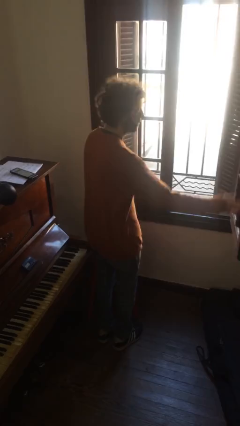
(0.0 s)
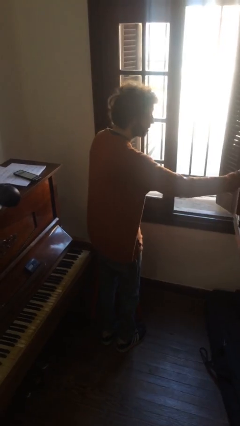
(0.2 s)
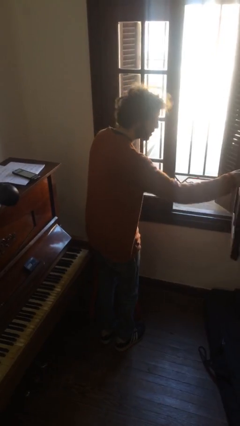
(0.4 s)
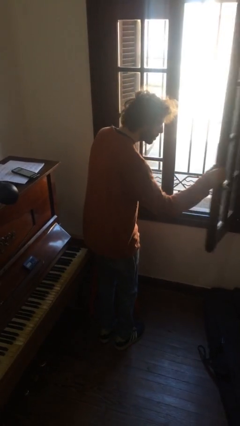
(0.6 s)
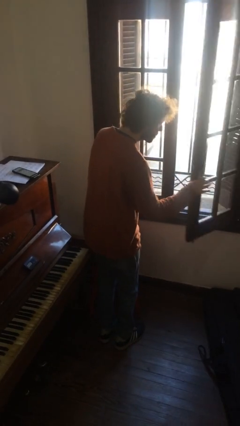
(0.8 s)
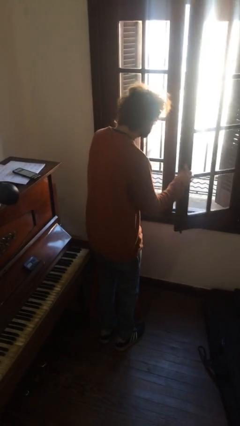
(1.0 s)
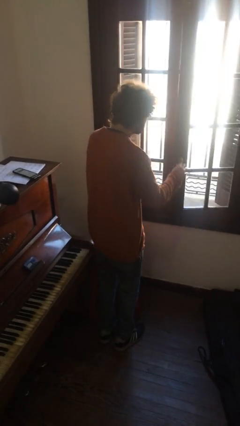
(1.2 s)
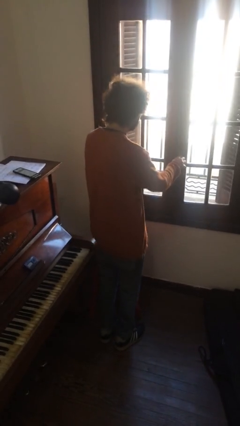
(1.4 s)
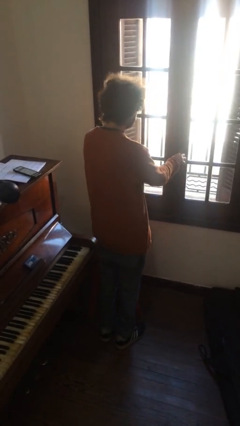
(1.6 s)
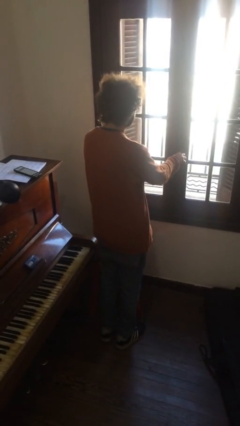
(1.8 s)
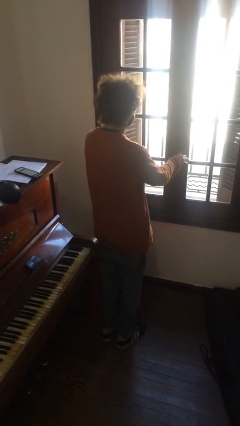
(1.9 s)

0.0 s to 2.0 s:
person closes home window

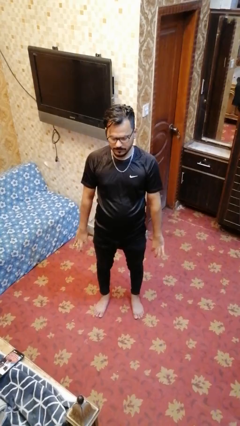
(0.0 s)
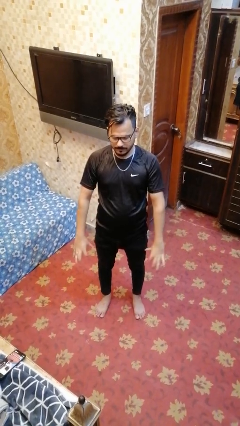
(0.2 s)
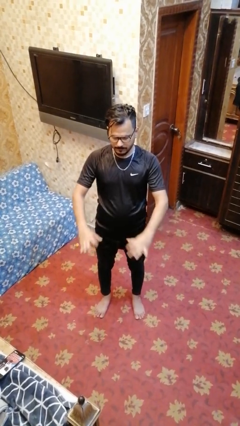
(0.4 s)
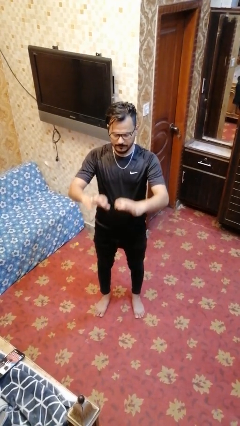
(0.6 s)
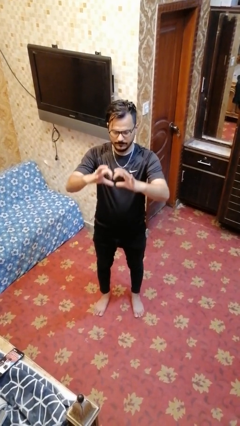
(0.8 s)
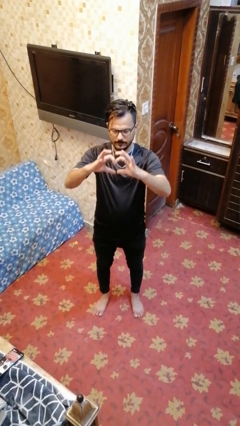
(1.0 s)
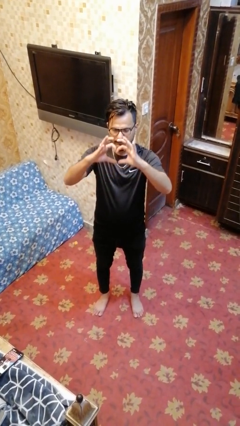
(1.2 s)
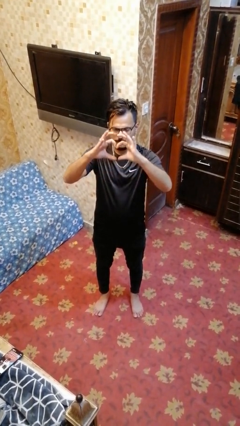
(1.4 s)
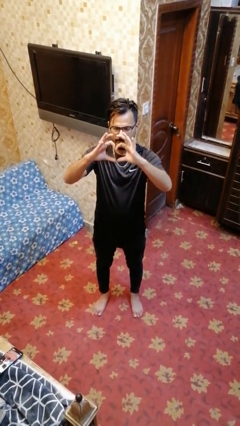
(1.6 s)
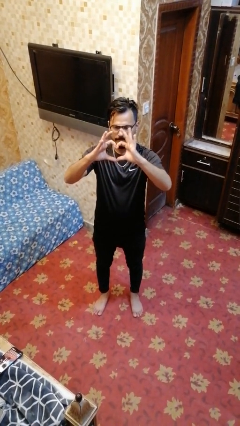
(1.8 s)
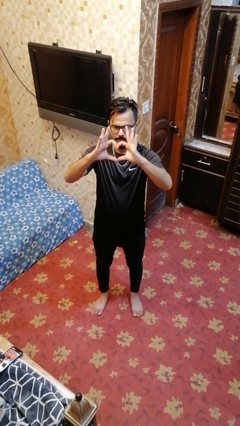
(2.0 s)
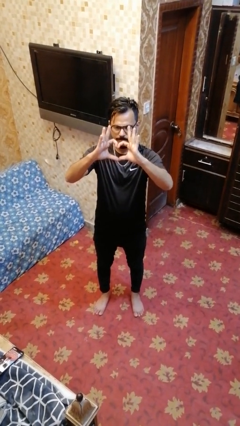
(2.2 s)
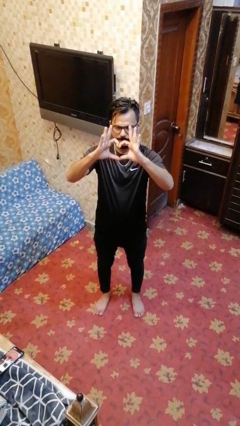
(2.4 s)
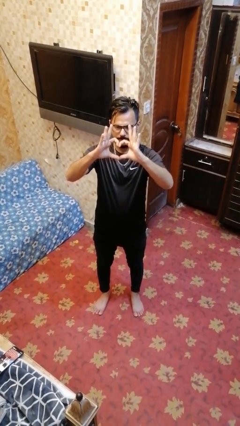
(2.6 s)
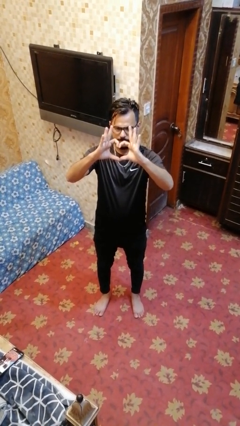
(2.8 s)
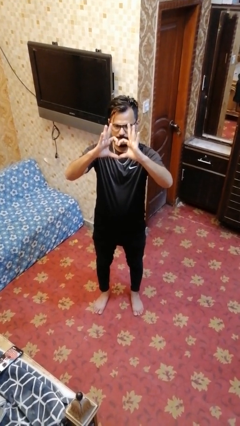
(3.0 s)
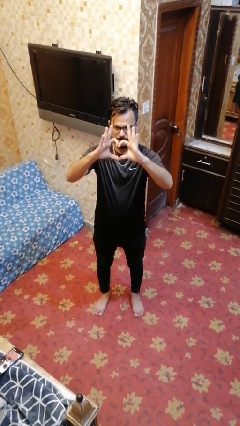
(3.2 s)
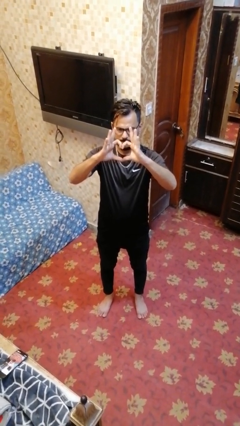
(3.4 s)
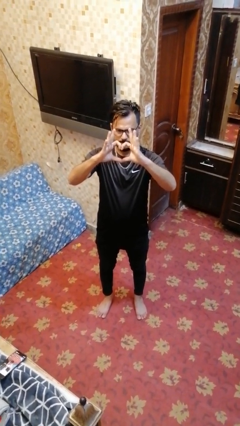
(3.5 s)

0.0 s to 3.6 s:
person gestures heart

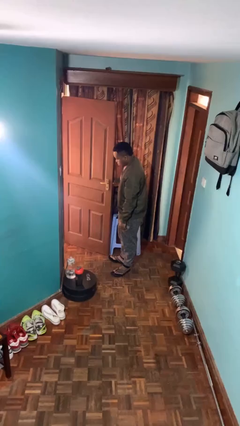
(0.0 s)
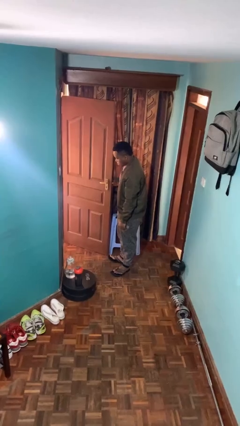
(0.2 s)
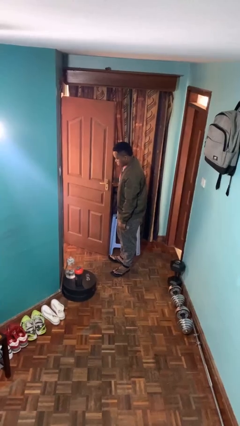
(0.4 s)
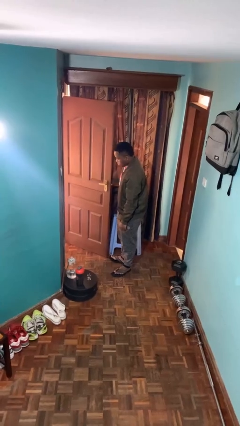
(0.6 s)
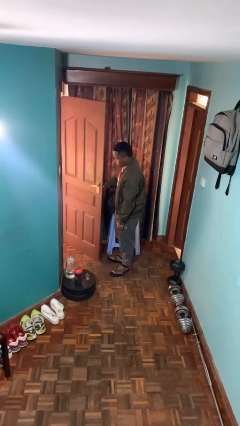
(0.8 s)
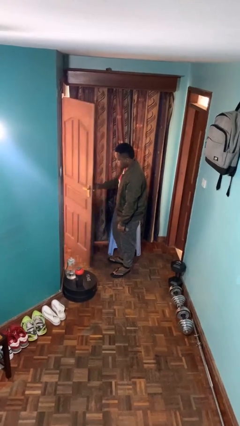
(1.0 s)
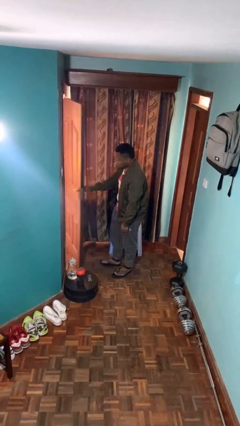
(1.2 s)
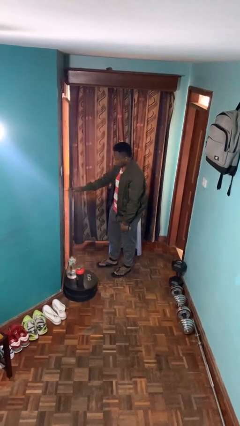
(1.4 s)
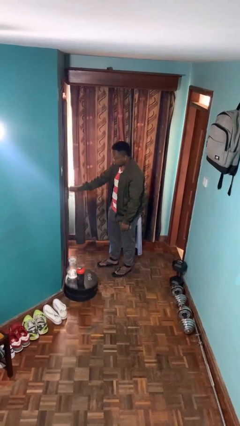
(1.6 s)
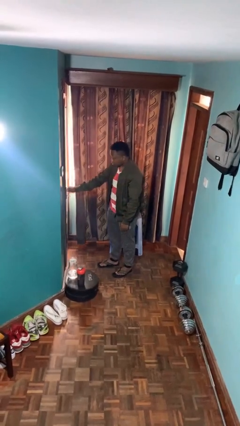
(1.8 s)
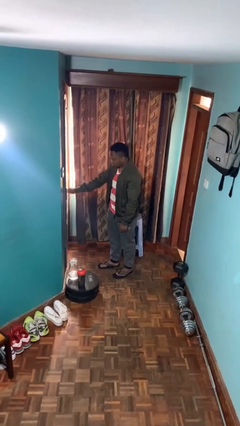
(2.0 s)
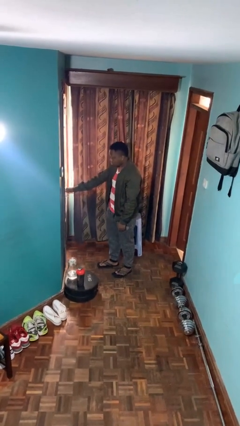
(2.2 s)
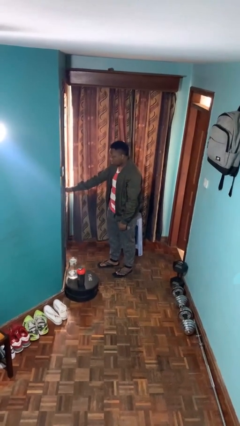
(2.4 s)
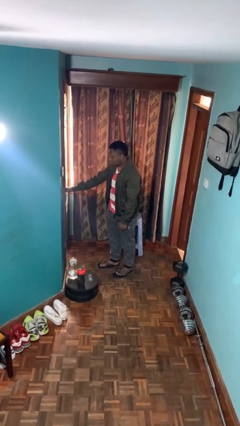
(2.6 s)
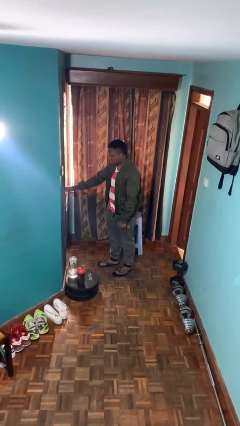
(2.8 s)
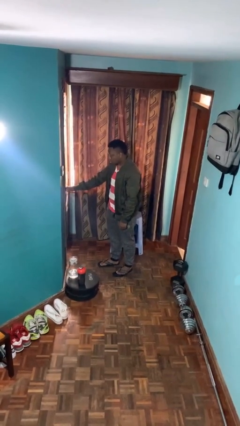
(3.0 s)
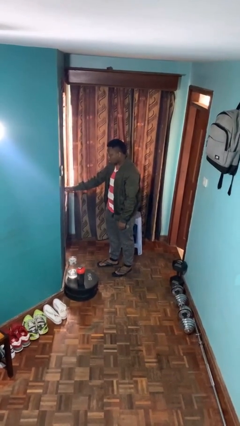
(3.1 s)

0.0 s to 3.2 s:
person closes facility door

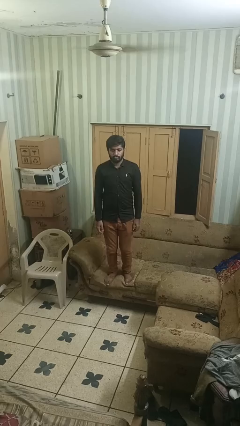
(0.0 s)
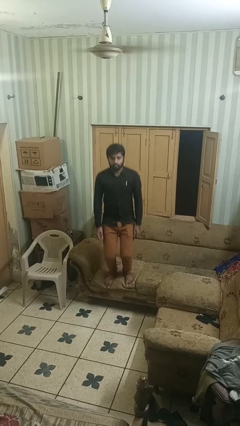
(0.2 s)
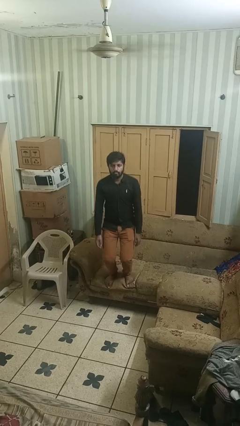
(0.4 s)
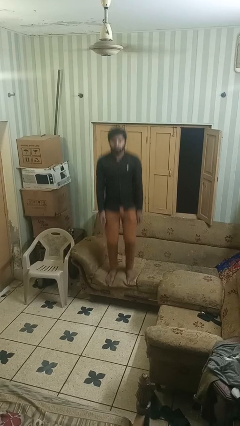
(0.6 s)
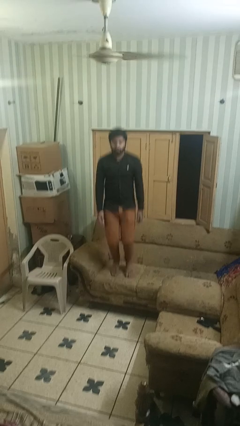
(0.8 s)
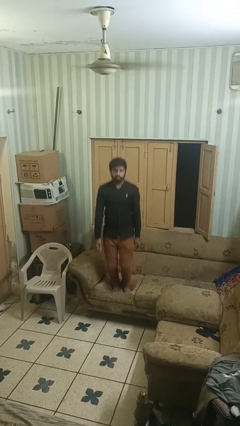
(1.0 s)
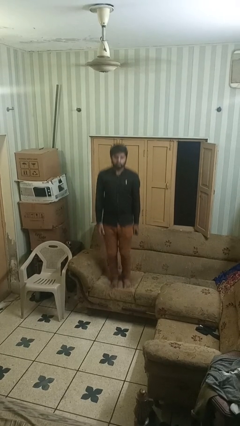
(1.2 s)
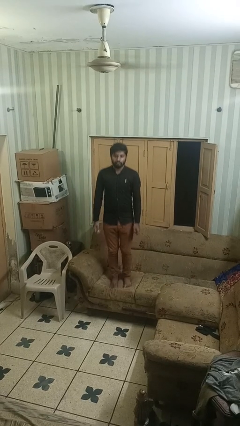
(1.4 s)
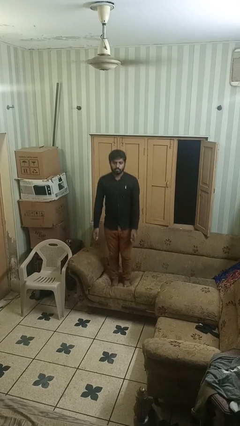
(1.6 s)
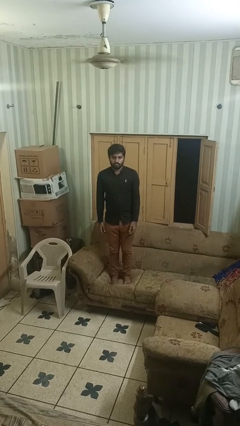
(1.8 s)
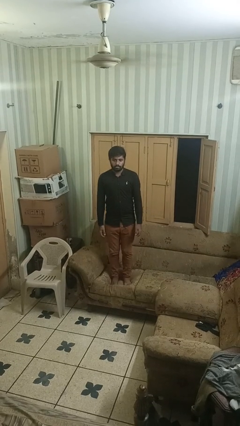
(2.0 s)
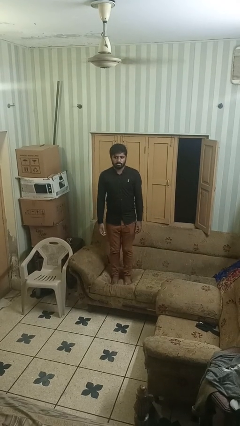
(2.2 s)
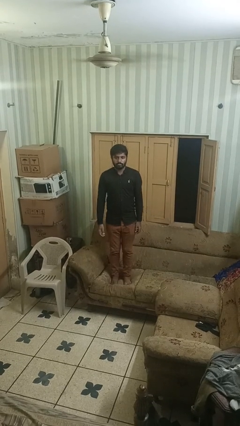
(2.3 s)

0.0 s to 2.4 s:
person jumps on couch

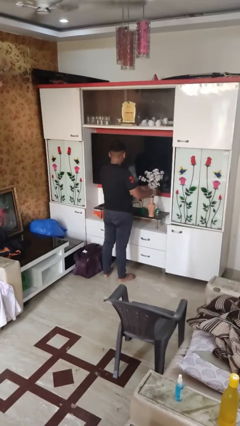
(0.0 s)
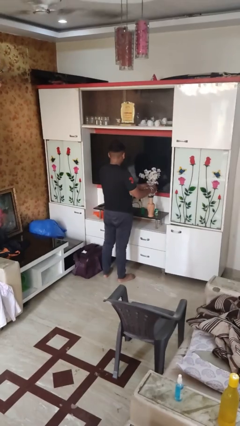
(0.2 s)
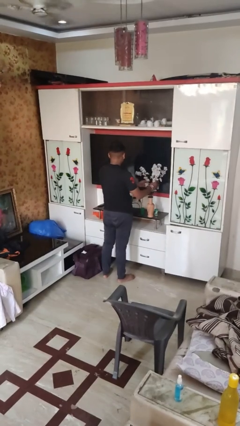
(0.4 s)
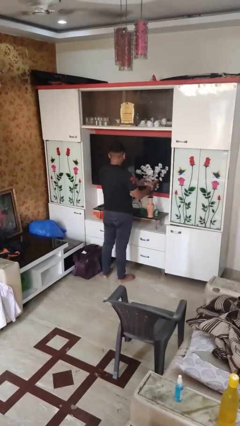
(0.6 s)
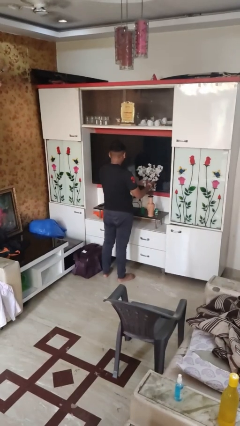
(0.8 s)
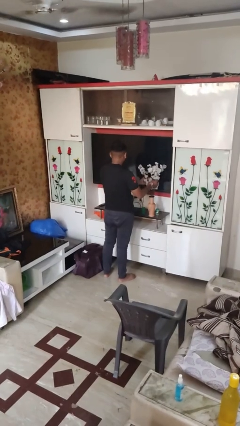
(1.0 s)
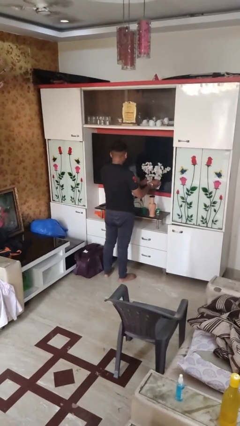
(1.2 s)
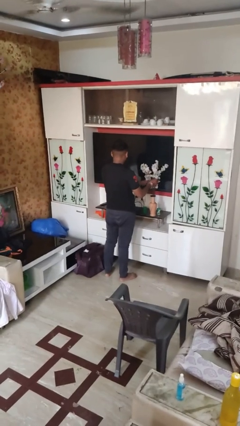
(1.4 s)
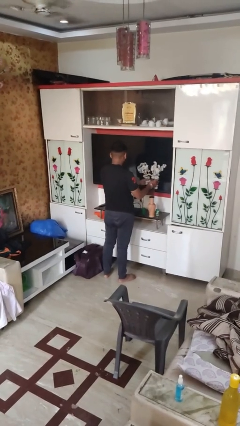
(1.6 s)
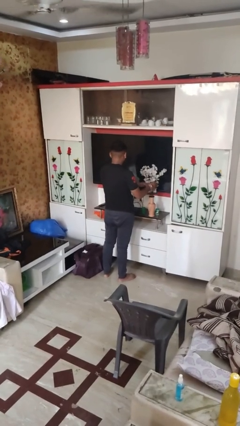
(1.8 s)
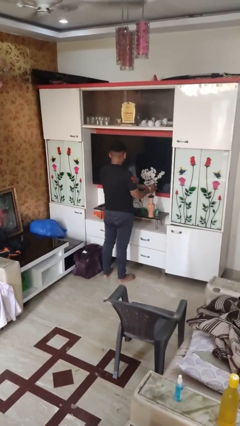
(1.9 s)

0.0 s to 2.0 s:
person arranges flowers in vase

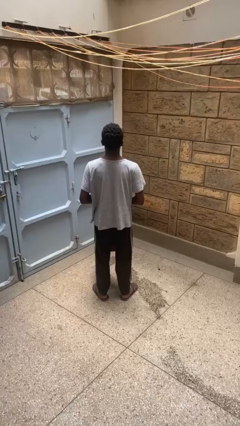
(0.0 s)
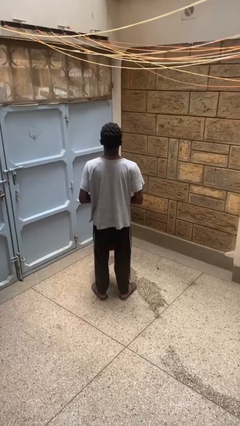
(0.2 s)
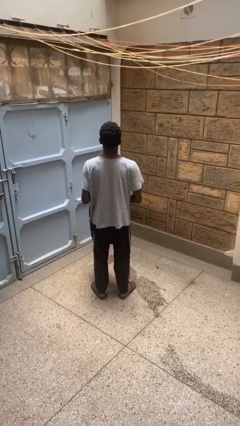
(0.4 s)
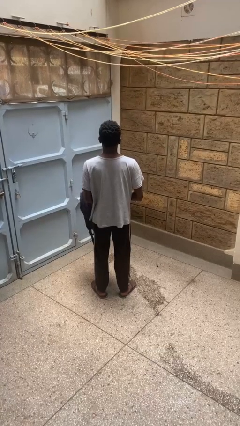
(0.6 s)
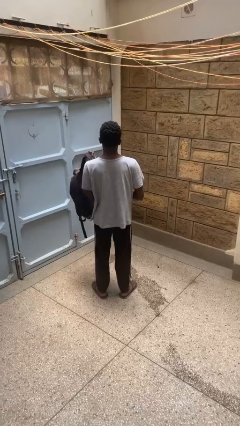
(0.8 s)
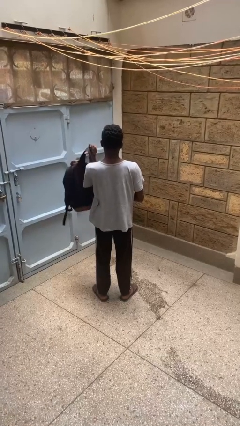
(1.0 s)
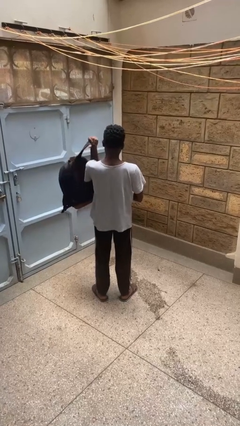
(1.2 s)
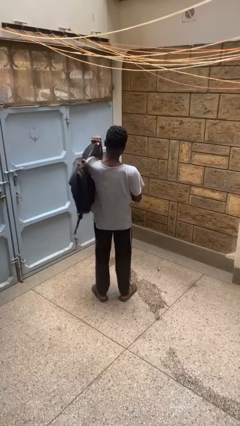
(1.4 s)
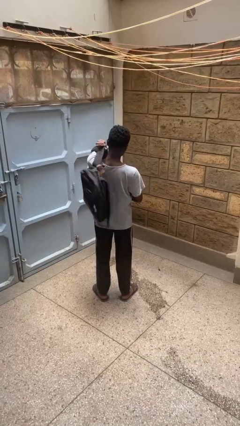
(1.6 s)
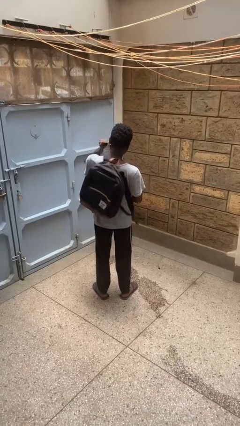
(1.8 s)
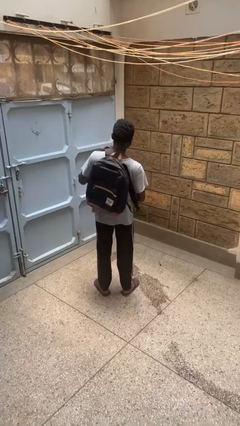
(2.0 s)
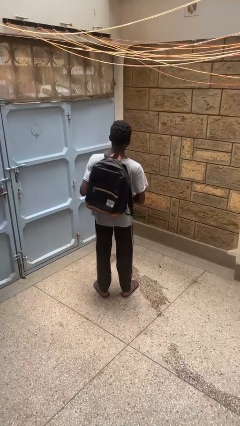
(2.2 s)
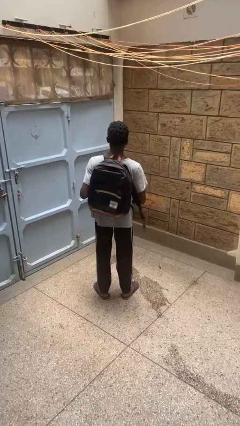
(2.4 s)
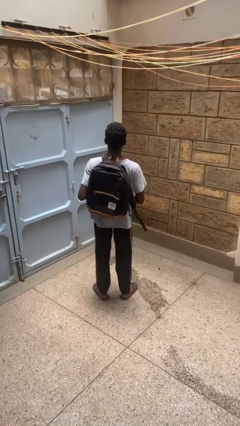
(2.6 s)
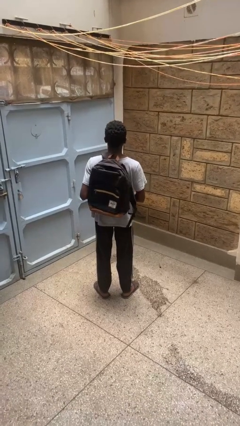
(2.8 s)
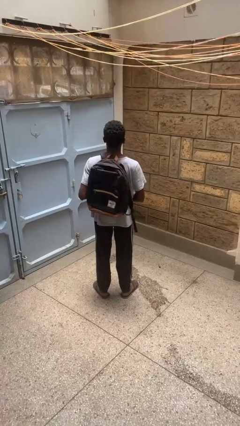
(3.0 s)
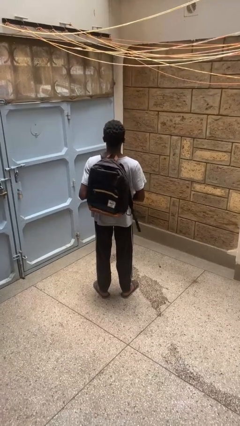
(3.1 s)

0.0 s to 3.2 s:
person puts on backpack

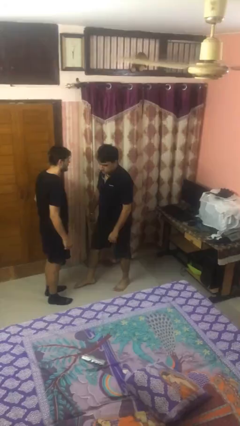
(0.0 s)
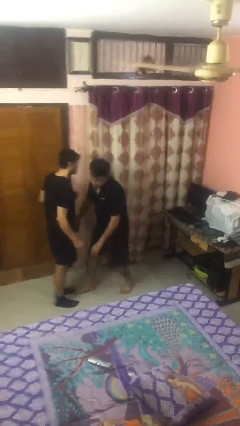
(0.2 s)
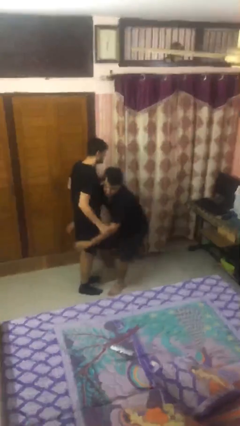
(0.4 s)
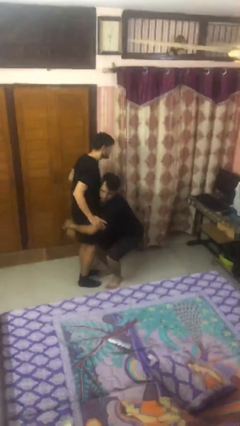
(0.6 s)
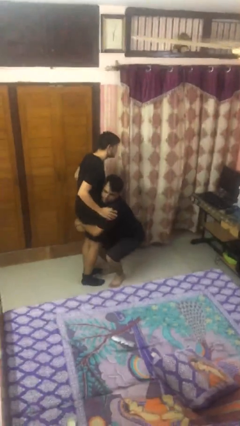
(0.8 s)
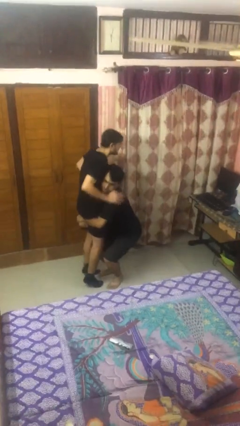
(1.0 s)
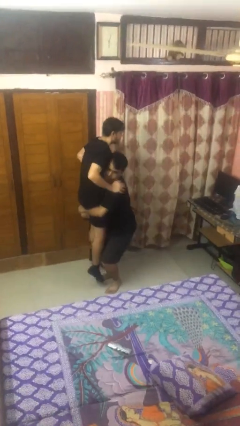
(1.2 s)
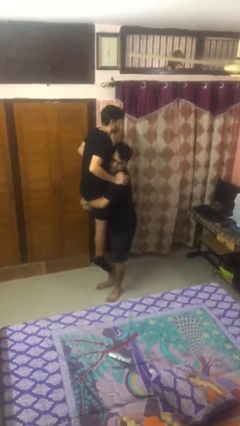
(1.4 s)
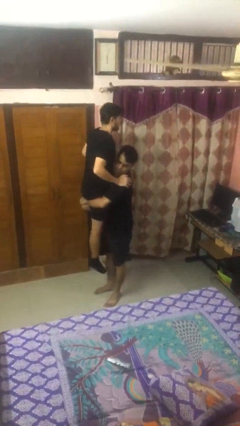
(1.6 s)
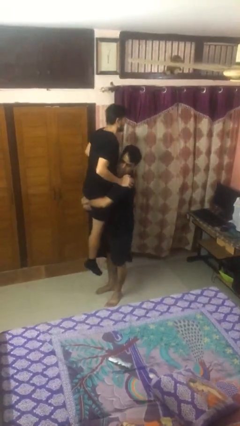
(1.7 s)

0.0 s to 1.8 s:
person picks up person
